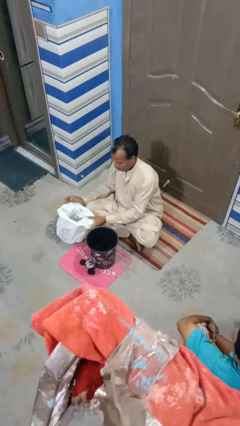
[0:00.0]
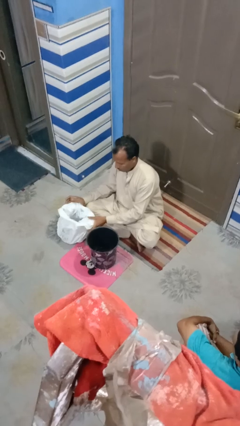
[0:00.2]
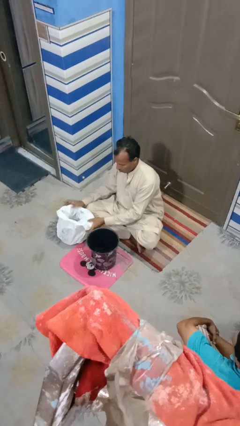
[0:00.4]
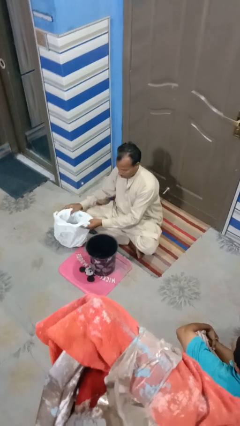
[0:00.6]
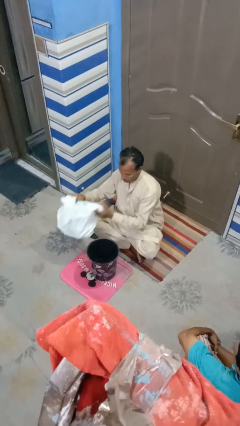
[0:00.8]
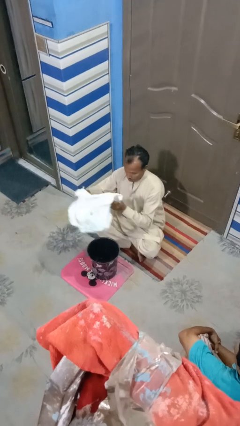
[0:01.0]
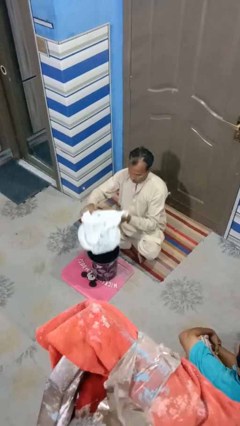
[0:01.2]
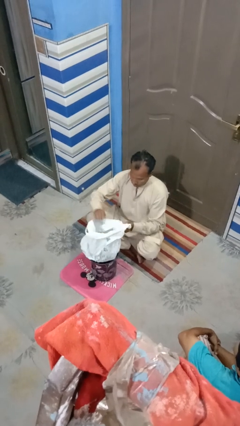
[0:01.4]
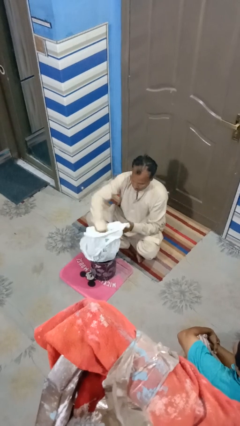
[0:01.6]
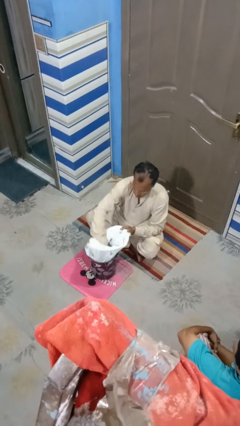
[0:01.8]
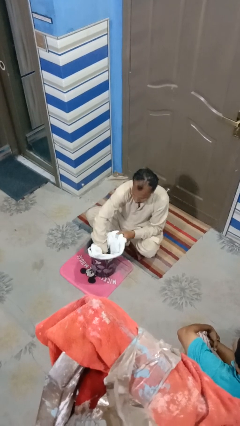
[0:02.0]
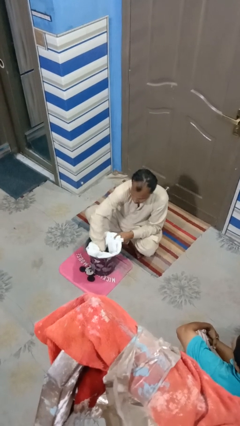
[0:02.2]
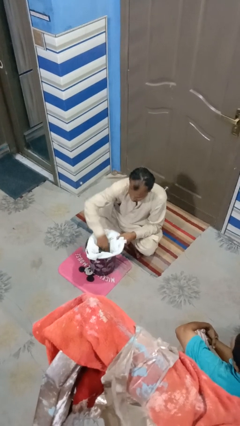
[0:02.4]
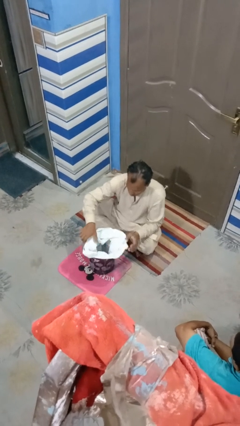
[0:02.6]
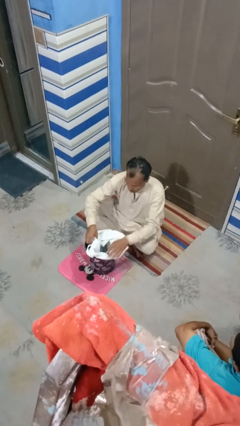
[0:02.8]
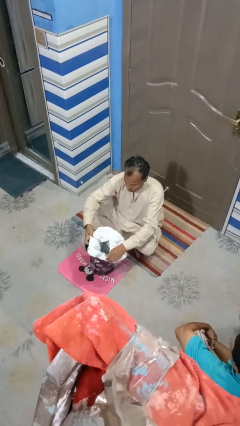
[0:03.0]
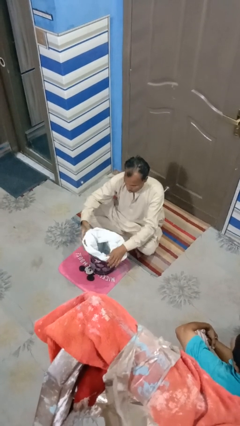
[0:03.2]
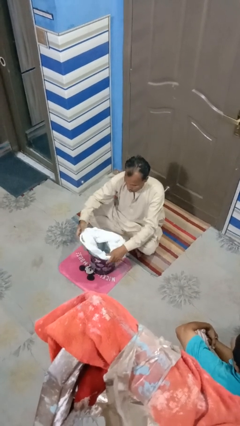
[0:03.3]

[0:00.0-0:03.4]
person removes trashbag from trashcan

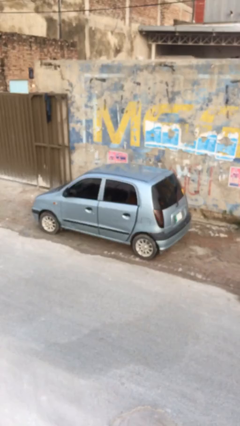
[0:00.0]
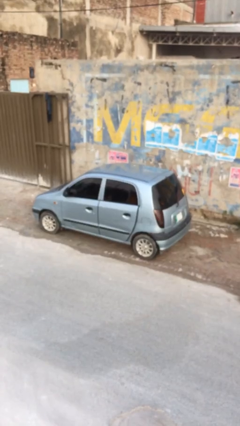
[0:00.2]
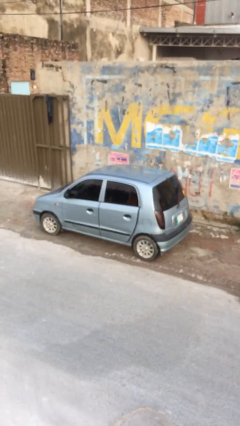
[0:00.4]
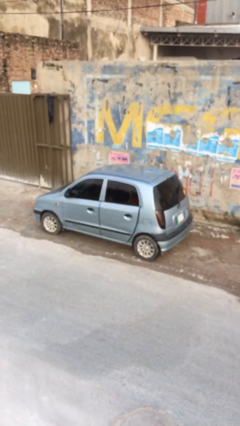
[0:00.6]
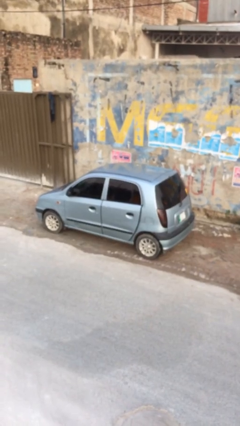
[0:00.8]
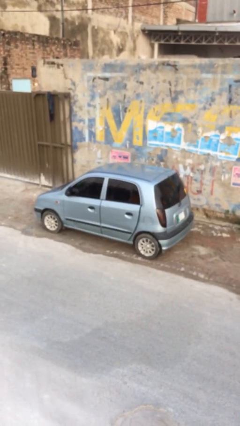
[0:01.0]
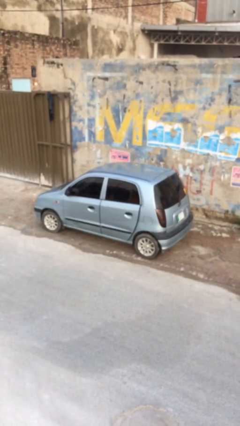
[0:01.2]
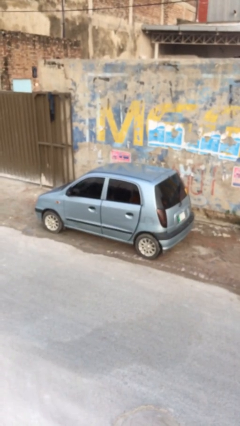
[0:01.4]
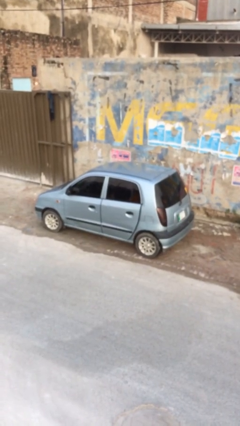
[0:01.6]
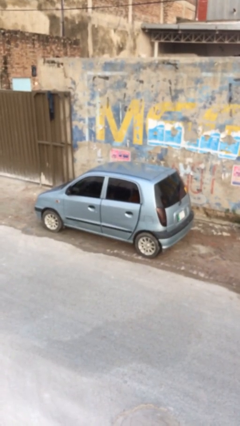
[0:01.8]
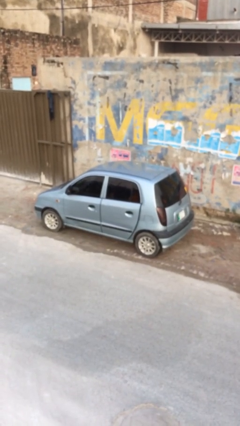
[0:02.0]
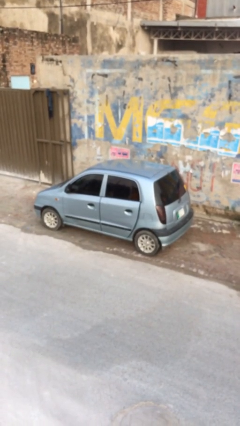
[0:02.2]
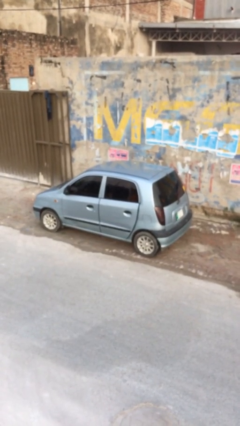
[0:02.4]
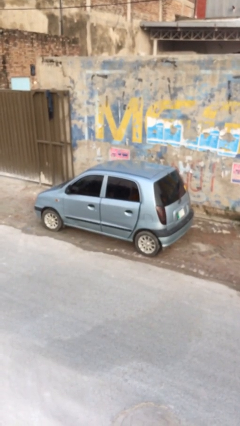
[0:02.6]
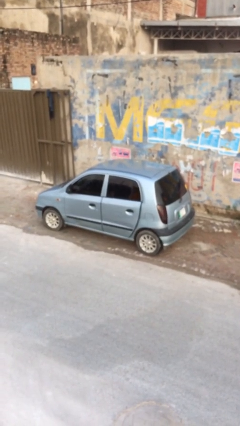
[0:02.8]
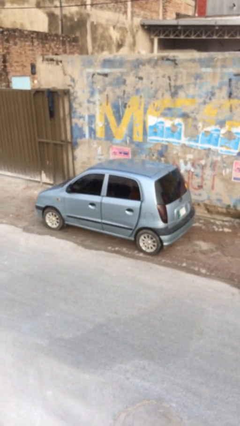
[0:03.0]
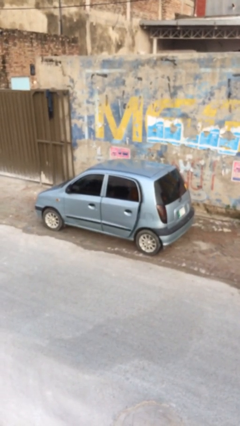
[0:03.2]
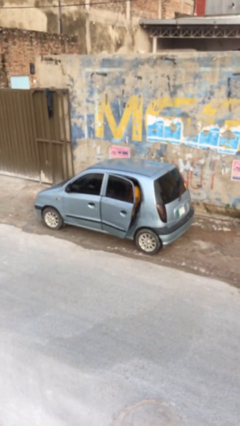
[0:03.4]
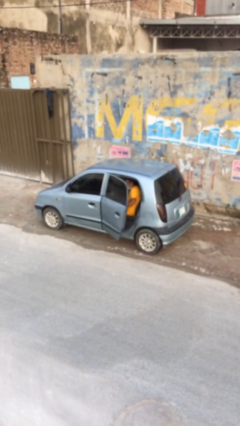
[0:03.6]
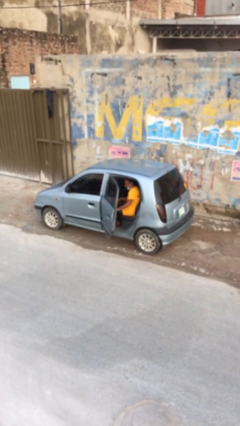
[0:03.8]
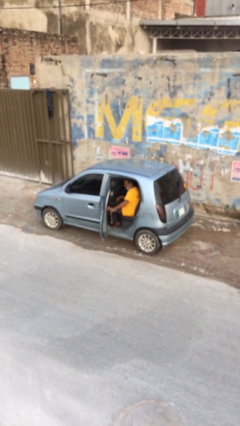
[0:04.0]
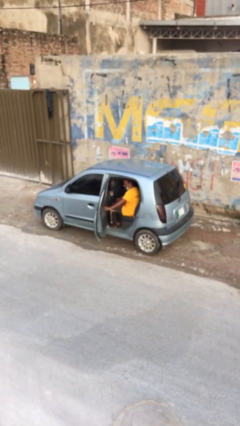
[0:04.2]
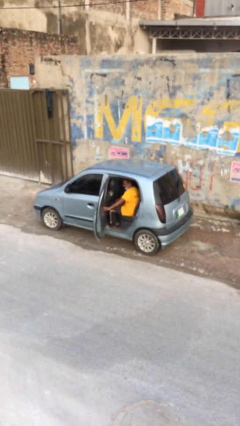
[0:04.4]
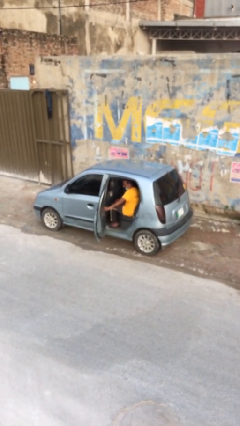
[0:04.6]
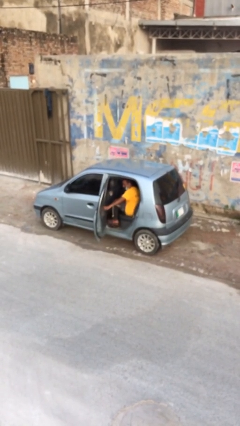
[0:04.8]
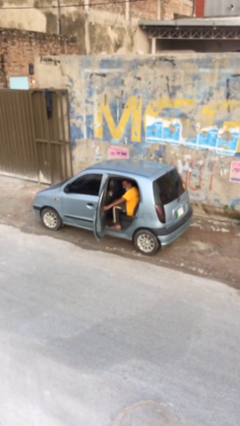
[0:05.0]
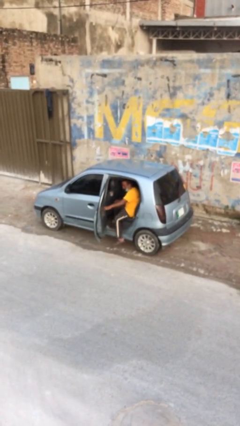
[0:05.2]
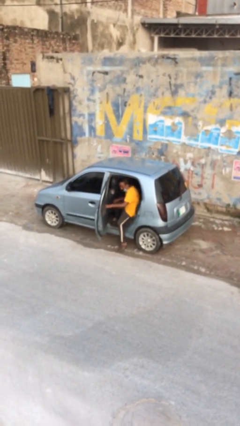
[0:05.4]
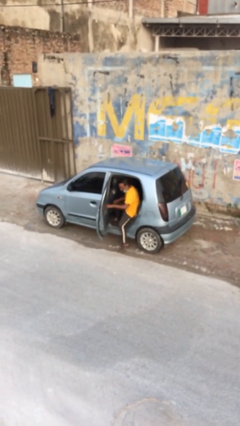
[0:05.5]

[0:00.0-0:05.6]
person opens car door

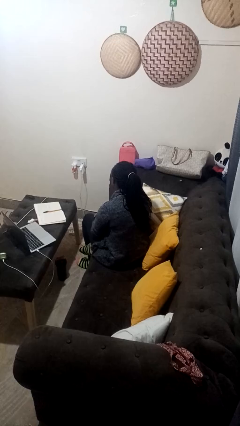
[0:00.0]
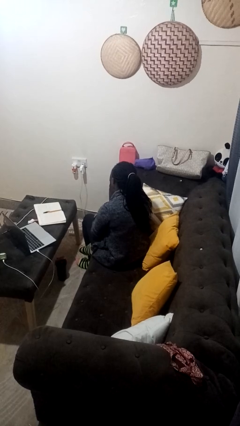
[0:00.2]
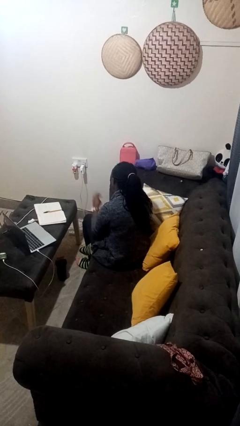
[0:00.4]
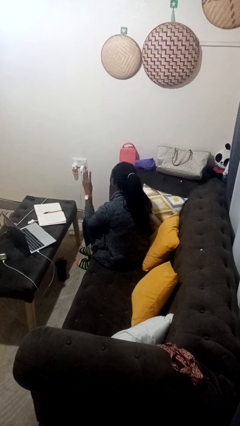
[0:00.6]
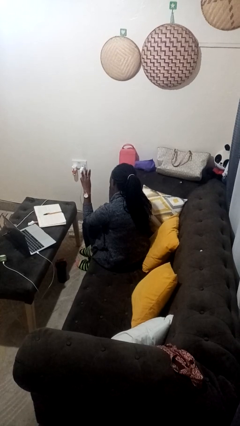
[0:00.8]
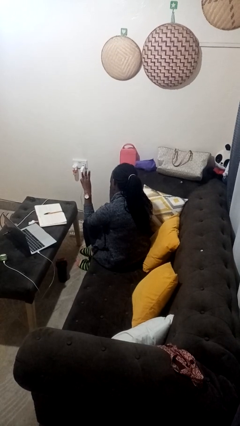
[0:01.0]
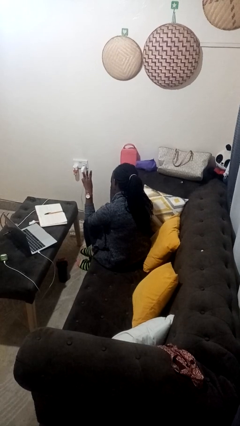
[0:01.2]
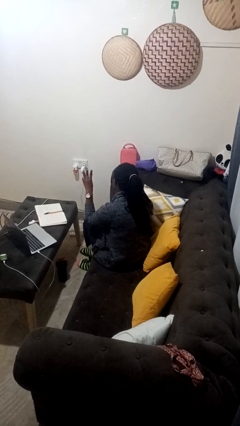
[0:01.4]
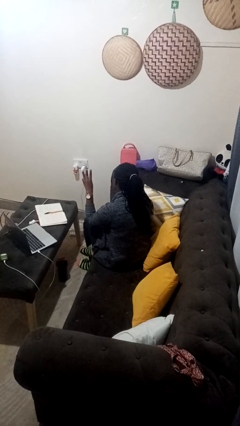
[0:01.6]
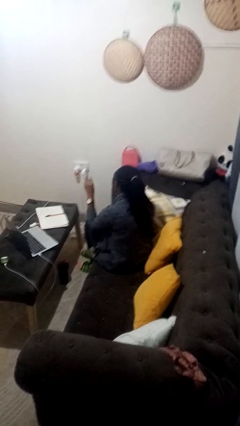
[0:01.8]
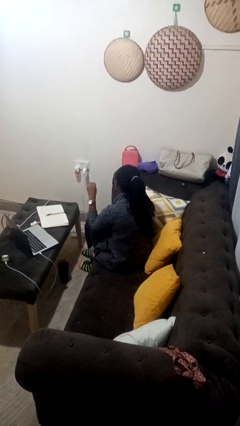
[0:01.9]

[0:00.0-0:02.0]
person gestures number three

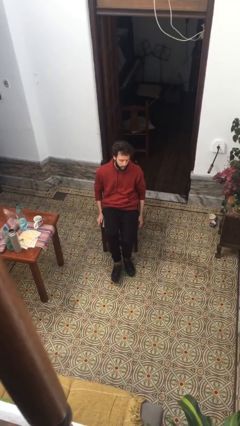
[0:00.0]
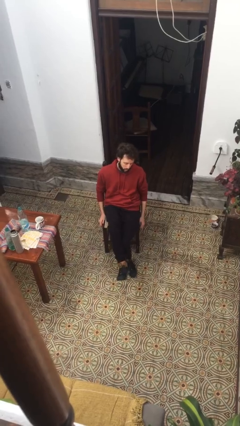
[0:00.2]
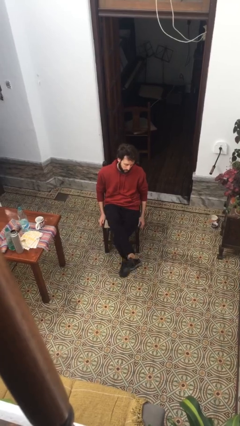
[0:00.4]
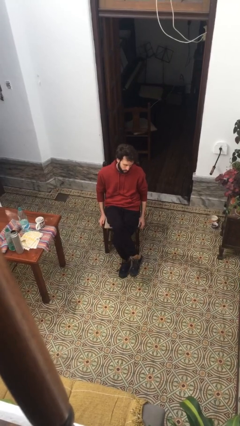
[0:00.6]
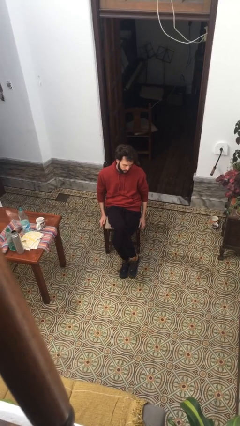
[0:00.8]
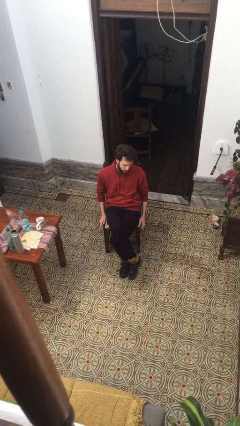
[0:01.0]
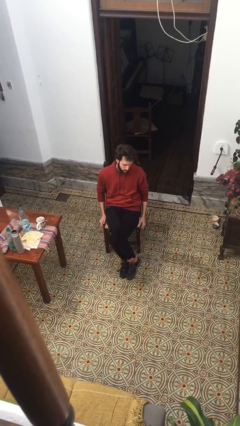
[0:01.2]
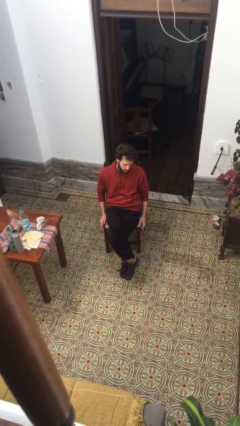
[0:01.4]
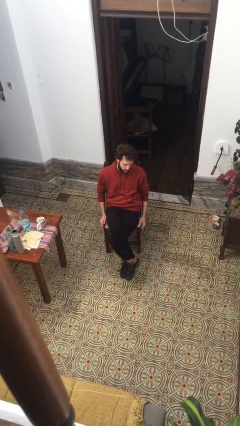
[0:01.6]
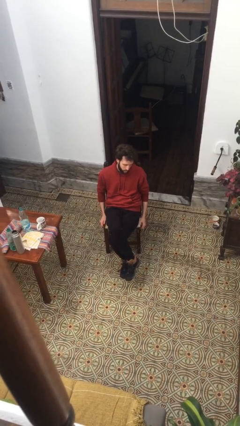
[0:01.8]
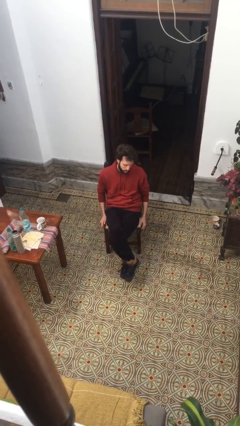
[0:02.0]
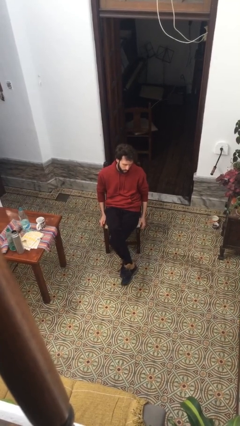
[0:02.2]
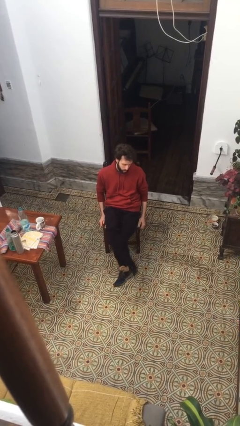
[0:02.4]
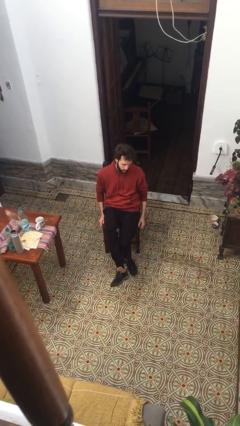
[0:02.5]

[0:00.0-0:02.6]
person crosses legs

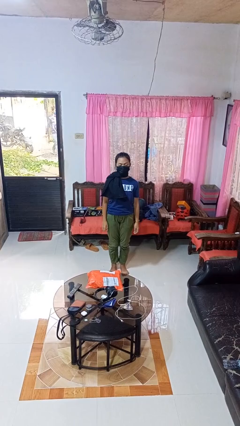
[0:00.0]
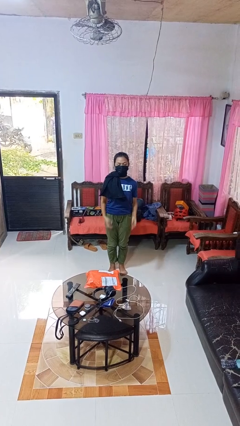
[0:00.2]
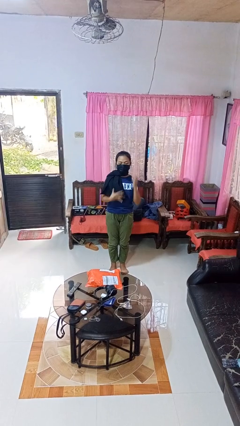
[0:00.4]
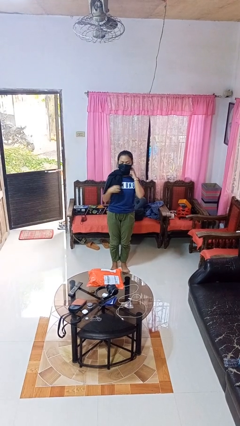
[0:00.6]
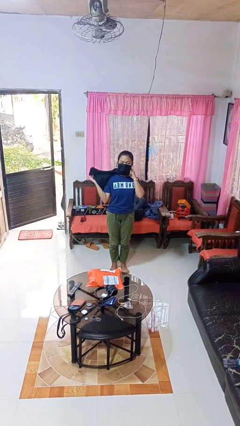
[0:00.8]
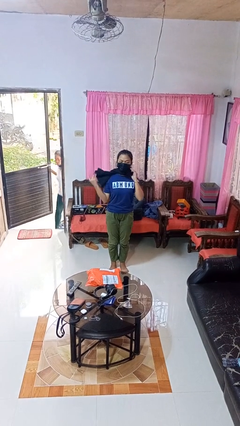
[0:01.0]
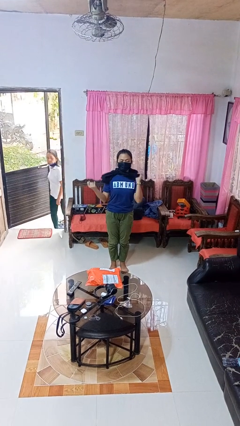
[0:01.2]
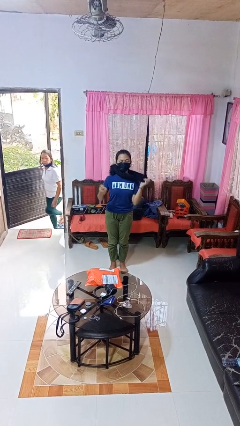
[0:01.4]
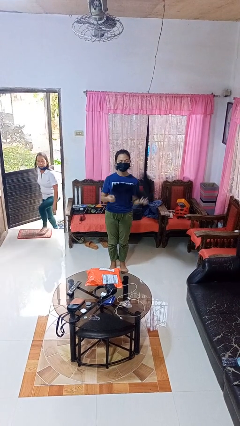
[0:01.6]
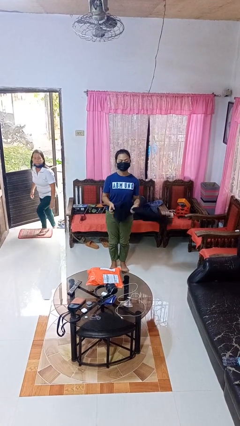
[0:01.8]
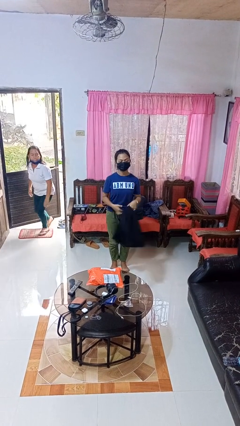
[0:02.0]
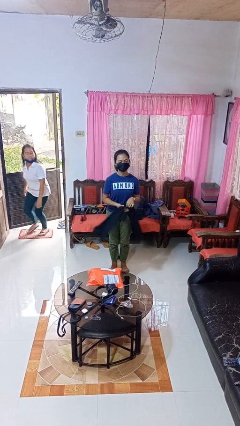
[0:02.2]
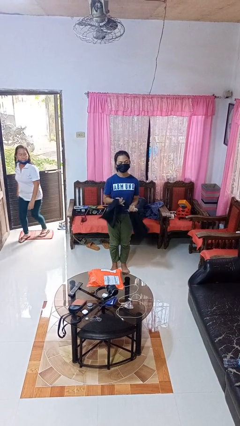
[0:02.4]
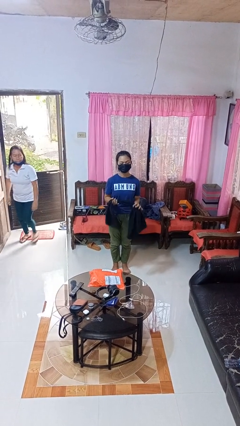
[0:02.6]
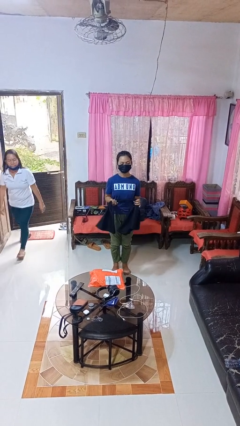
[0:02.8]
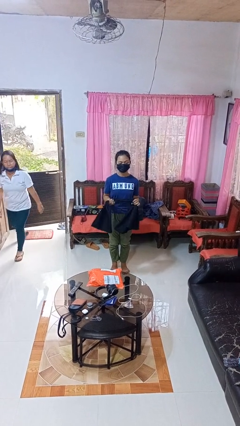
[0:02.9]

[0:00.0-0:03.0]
person takes off scarf

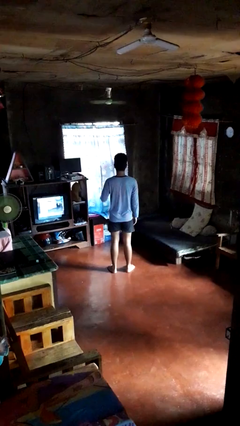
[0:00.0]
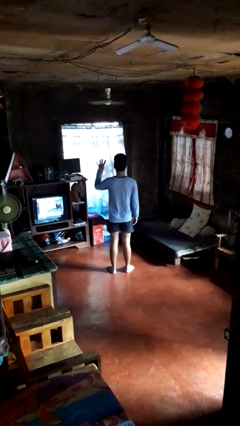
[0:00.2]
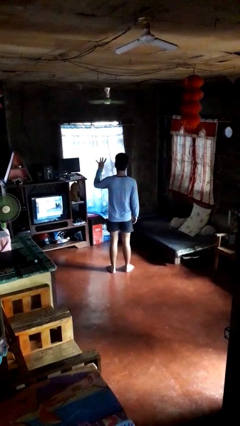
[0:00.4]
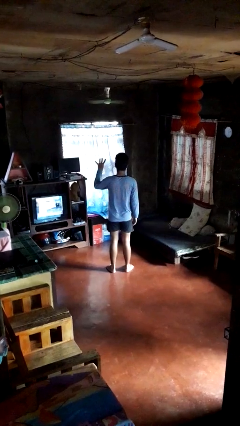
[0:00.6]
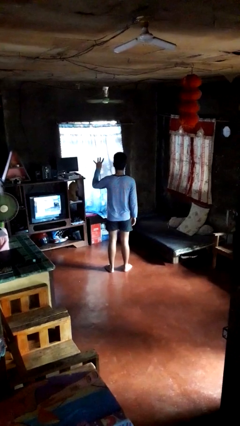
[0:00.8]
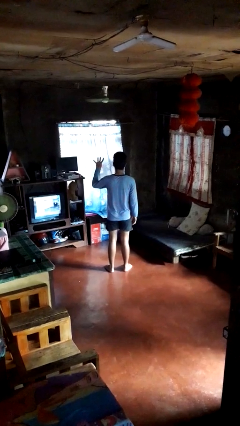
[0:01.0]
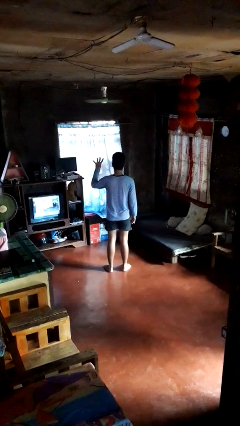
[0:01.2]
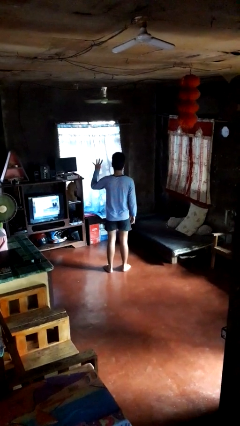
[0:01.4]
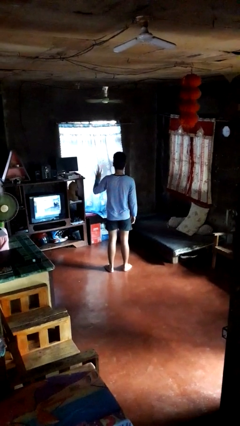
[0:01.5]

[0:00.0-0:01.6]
person gestures number four
